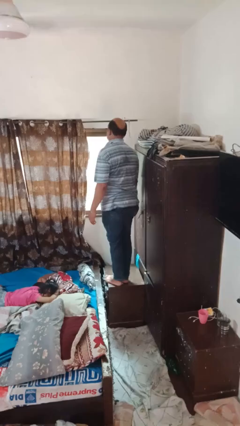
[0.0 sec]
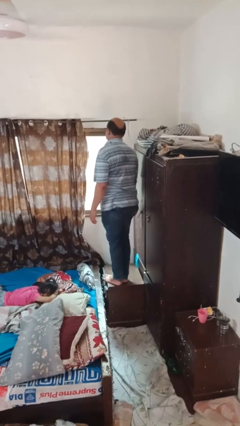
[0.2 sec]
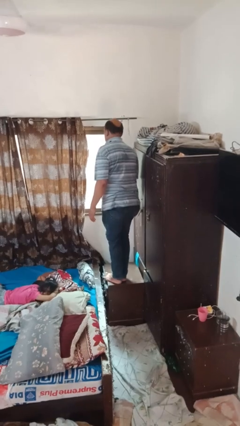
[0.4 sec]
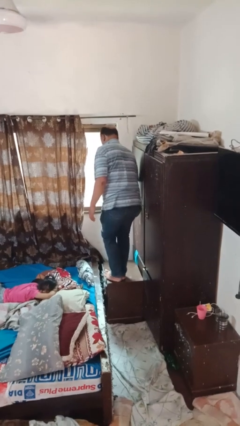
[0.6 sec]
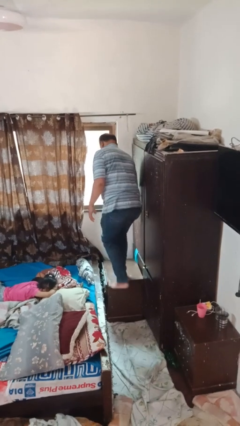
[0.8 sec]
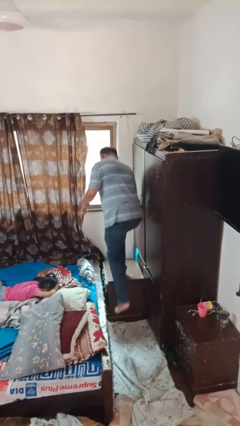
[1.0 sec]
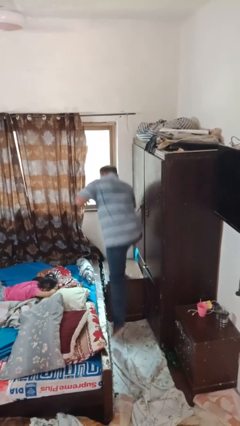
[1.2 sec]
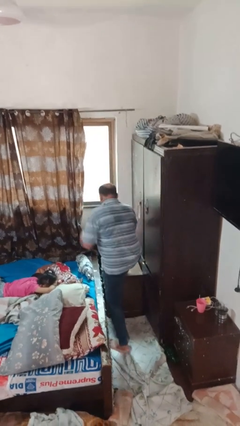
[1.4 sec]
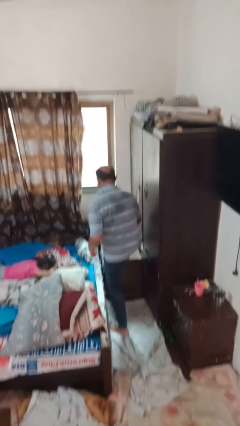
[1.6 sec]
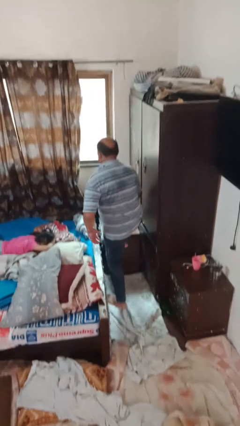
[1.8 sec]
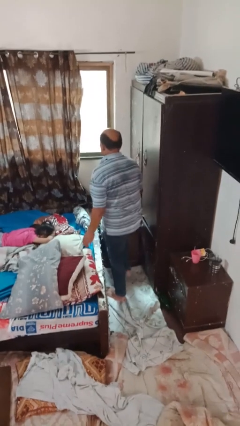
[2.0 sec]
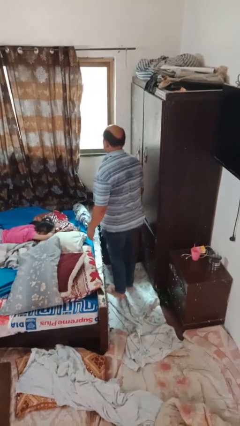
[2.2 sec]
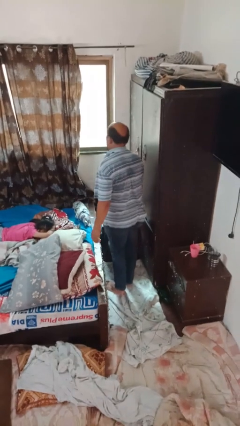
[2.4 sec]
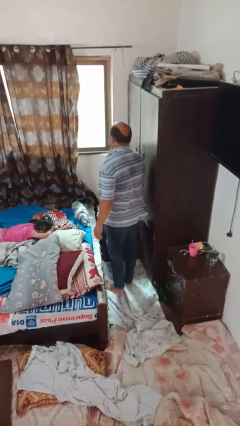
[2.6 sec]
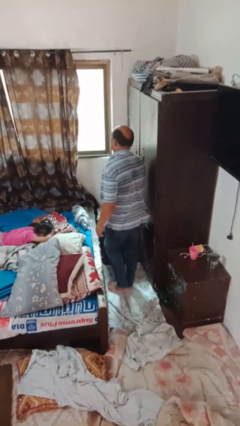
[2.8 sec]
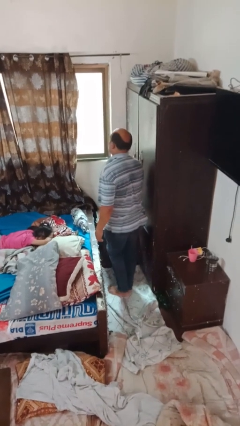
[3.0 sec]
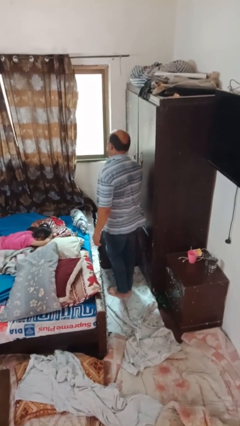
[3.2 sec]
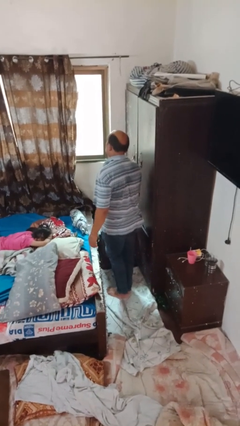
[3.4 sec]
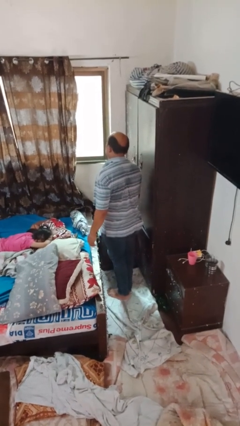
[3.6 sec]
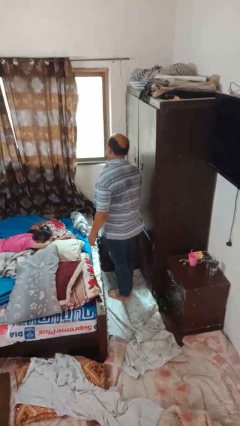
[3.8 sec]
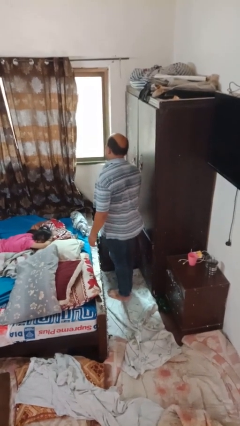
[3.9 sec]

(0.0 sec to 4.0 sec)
person climbs off table

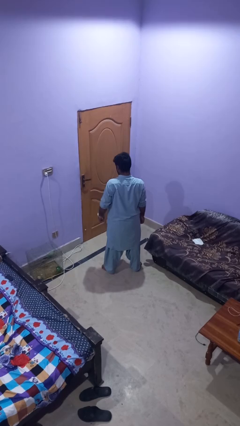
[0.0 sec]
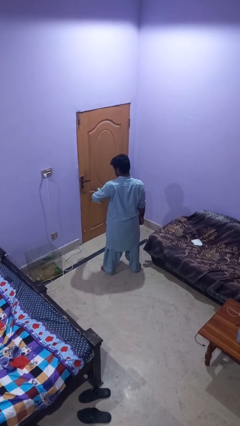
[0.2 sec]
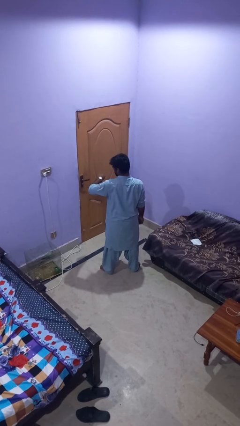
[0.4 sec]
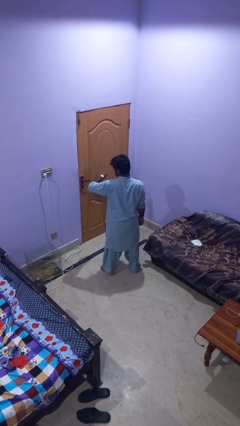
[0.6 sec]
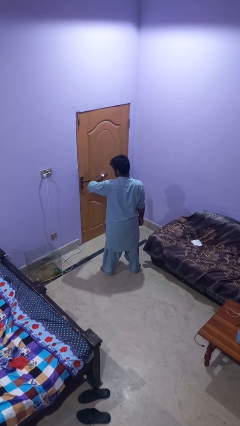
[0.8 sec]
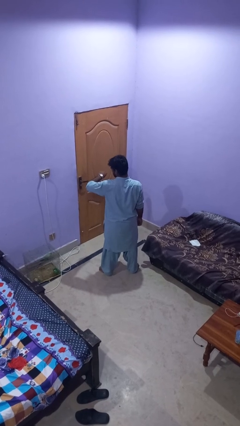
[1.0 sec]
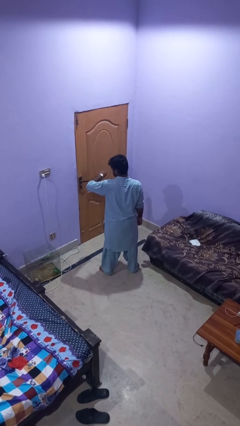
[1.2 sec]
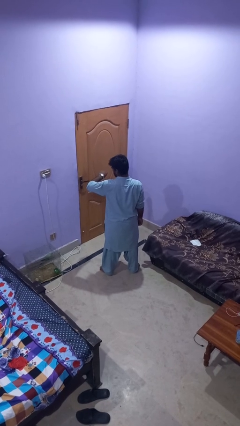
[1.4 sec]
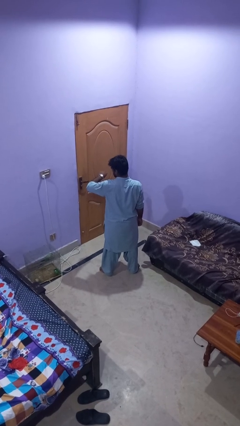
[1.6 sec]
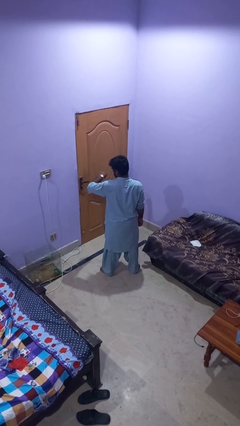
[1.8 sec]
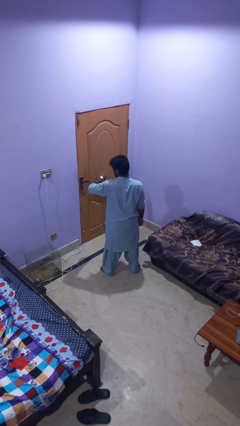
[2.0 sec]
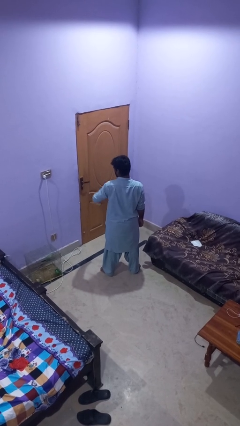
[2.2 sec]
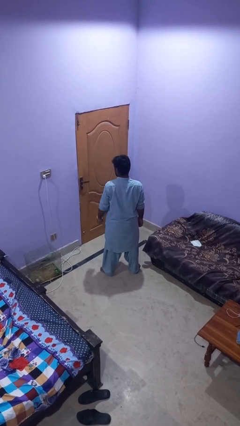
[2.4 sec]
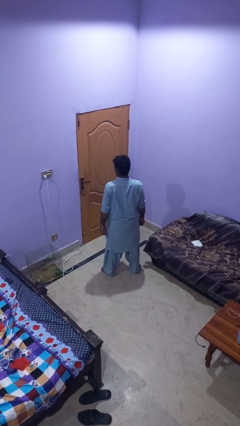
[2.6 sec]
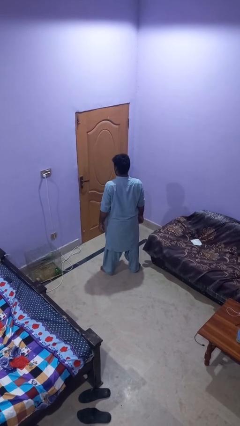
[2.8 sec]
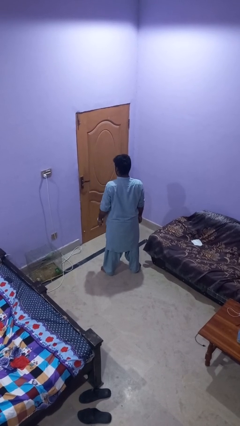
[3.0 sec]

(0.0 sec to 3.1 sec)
person looks at wristwatch

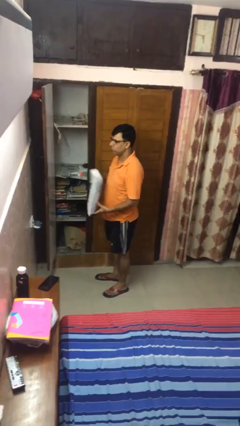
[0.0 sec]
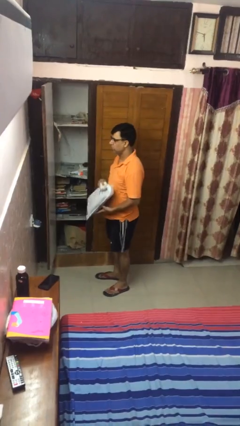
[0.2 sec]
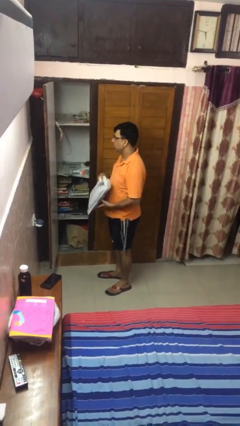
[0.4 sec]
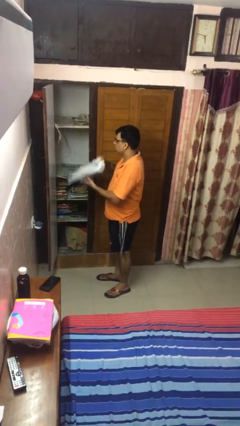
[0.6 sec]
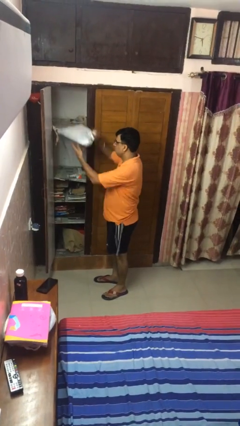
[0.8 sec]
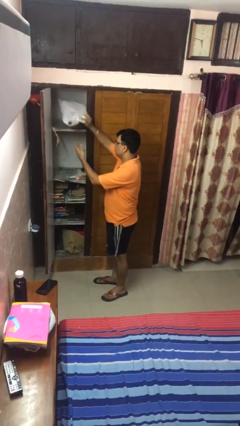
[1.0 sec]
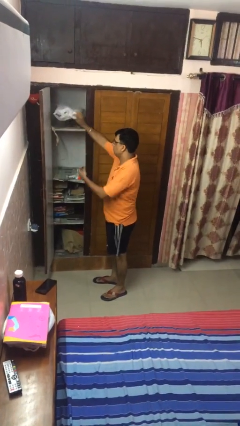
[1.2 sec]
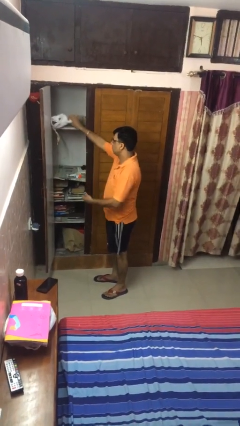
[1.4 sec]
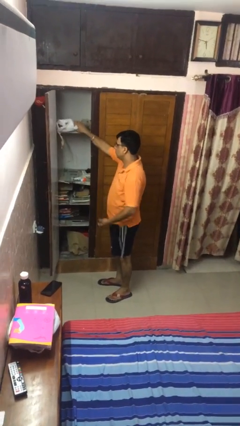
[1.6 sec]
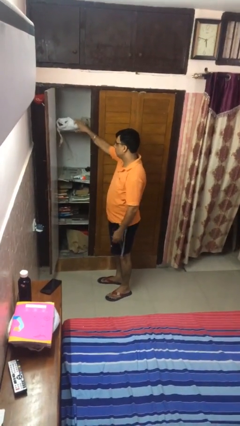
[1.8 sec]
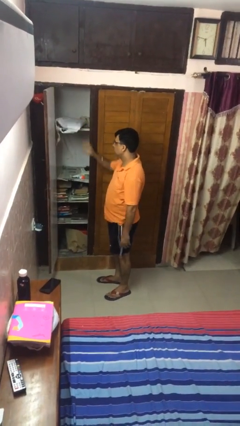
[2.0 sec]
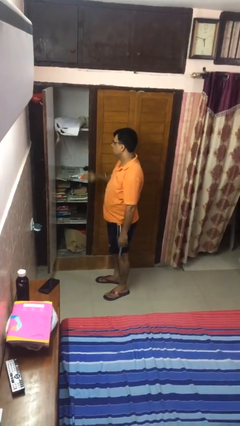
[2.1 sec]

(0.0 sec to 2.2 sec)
person puts down object on shelf

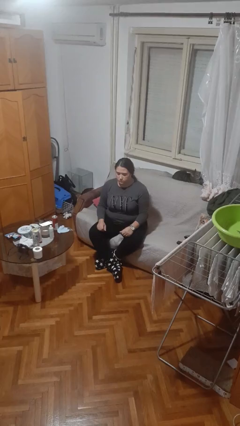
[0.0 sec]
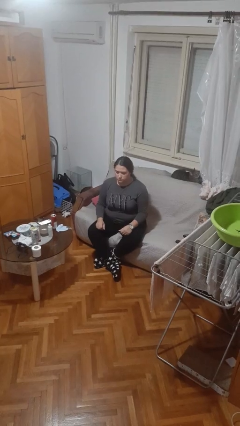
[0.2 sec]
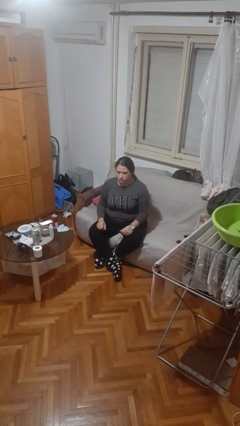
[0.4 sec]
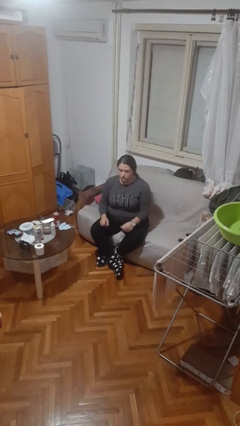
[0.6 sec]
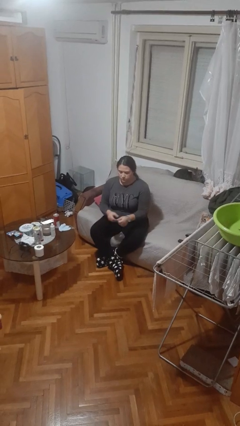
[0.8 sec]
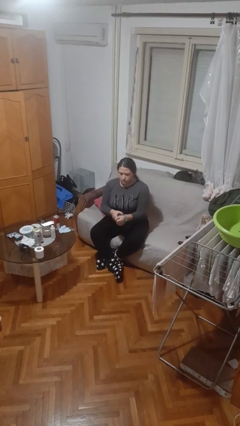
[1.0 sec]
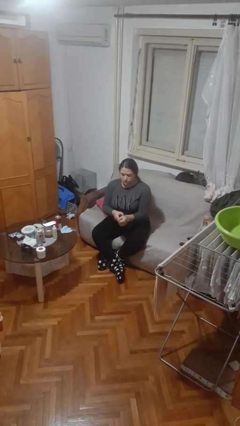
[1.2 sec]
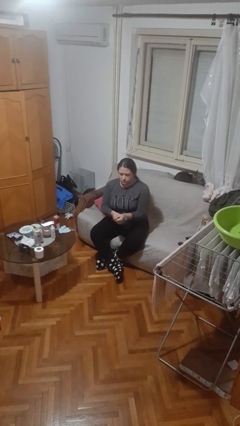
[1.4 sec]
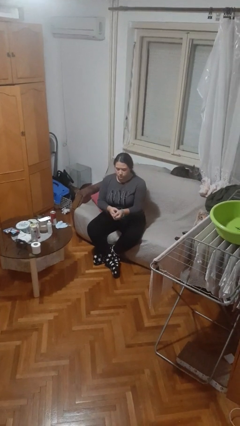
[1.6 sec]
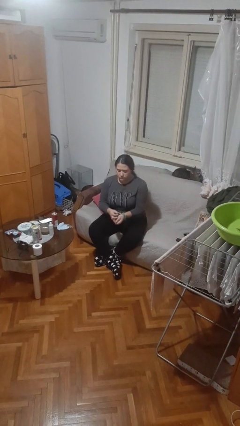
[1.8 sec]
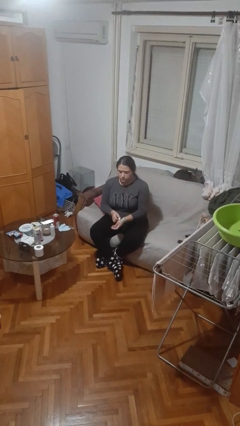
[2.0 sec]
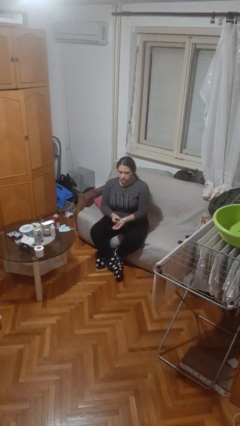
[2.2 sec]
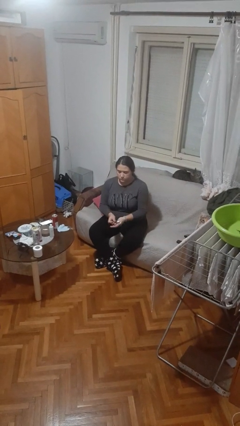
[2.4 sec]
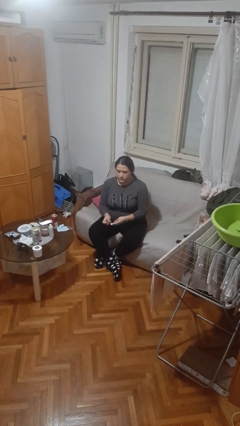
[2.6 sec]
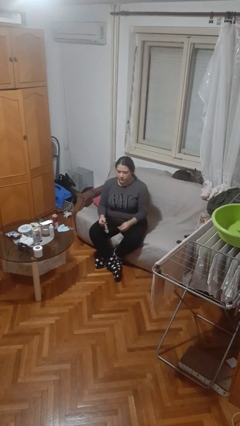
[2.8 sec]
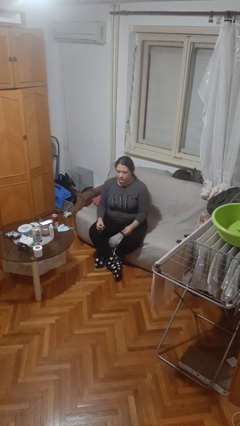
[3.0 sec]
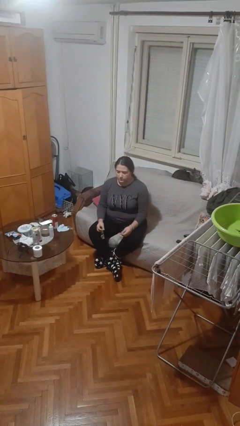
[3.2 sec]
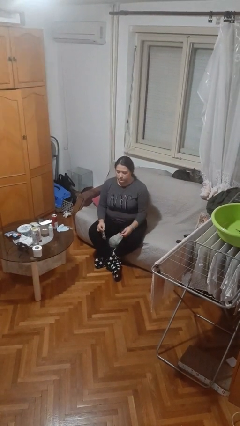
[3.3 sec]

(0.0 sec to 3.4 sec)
person takes off wristwatch

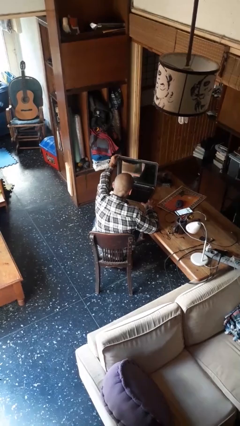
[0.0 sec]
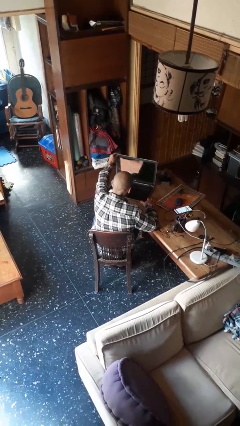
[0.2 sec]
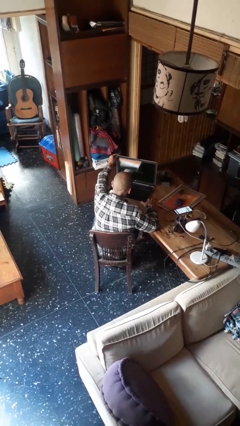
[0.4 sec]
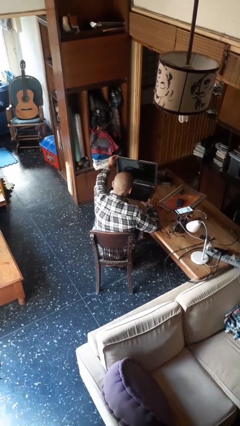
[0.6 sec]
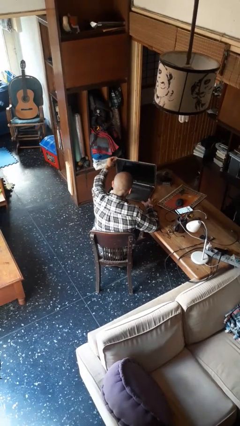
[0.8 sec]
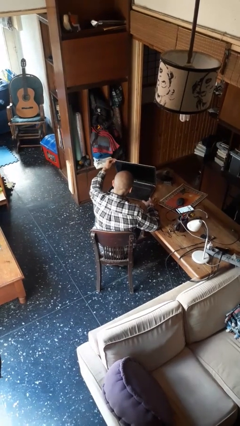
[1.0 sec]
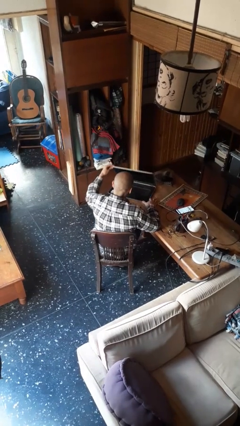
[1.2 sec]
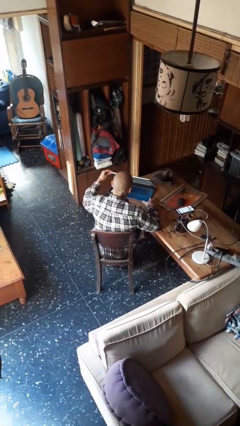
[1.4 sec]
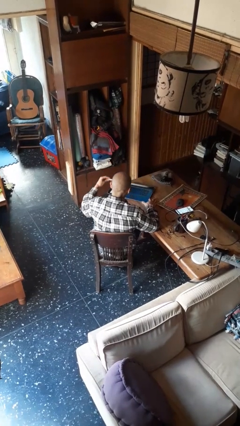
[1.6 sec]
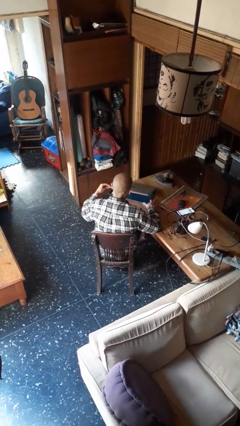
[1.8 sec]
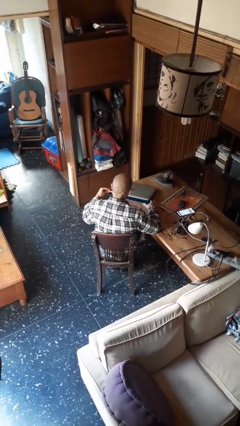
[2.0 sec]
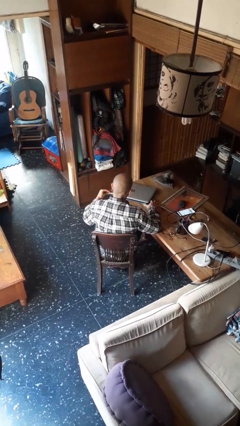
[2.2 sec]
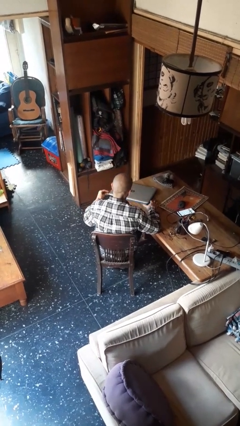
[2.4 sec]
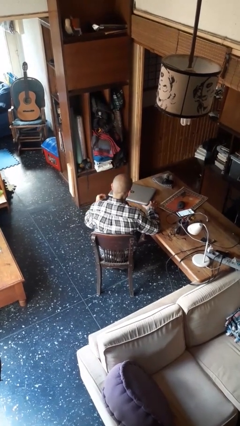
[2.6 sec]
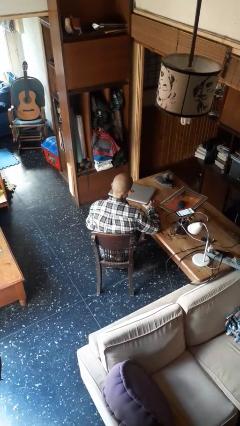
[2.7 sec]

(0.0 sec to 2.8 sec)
person closes laptop

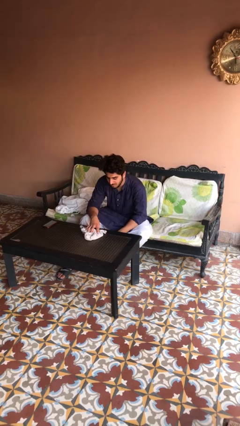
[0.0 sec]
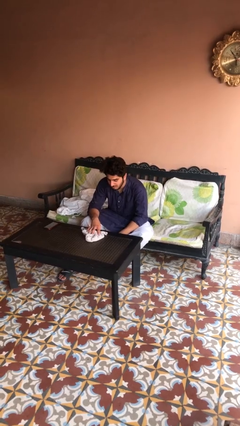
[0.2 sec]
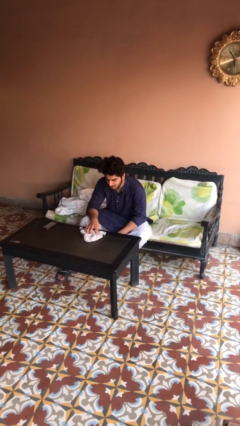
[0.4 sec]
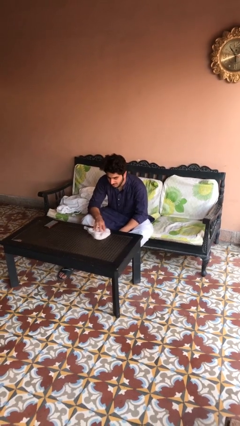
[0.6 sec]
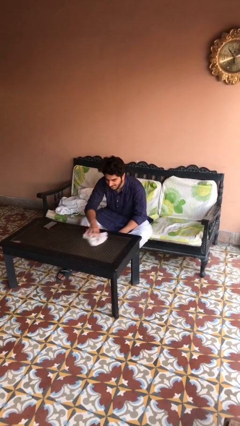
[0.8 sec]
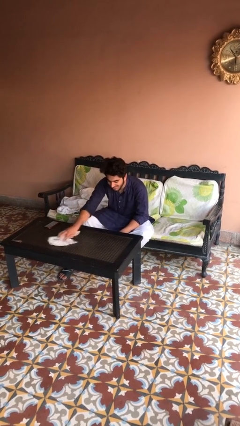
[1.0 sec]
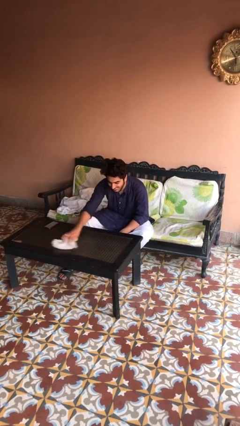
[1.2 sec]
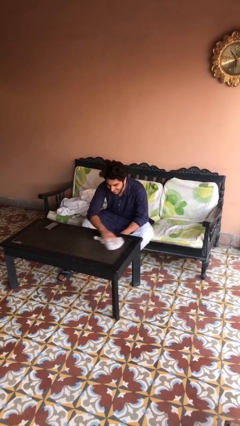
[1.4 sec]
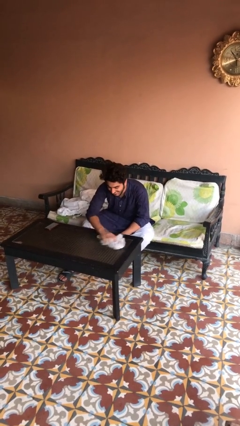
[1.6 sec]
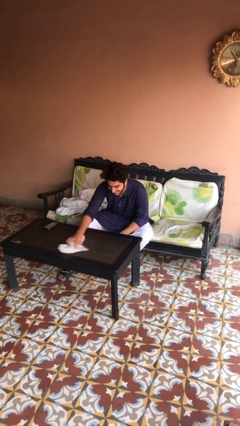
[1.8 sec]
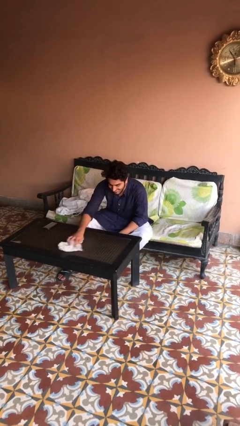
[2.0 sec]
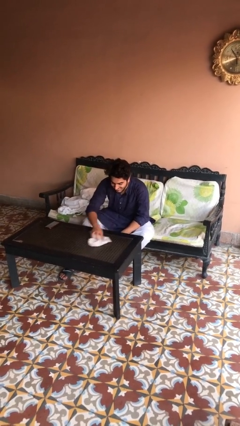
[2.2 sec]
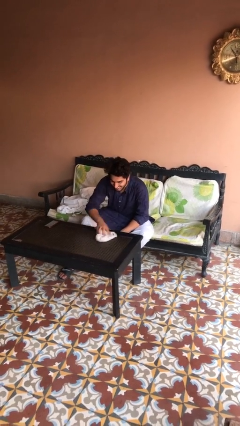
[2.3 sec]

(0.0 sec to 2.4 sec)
person cleans table with rag
